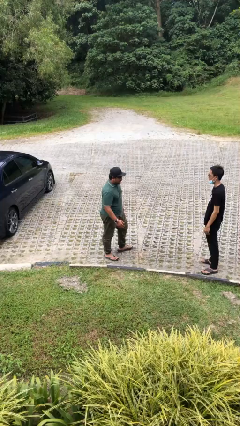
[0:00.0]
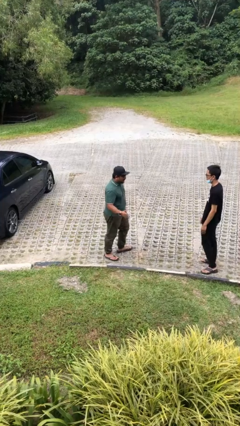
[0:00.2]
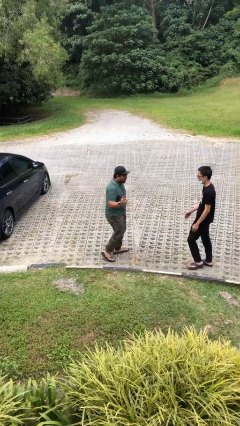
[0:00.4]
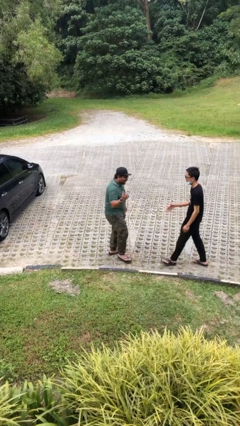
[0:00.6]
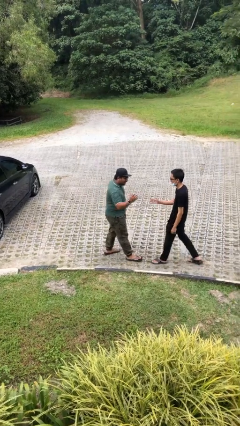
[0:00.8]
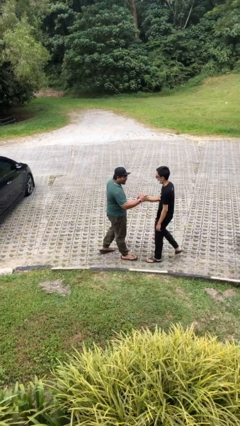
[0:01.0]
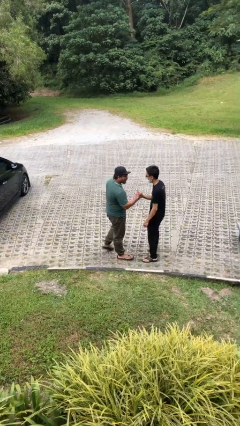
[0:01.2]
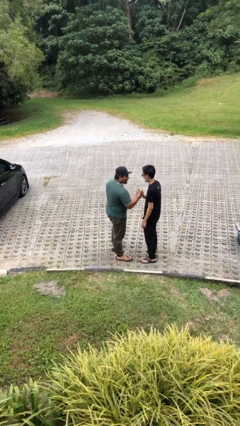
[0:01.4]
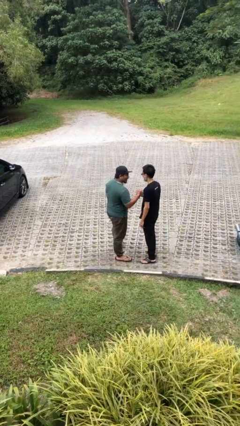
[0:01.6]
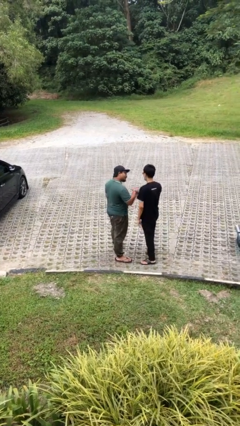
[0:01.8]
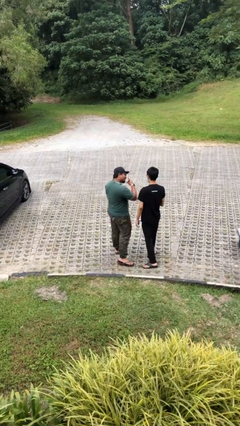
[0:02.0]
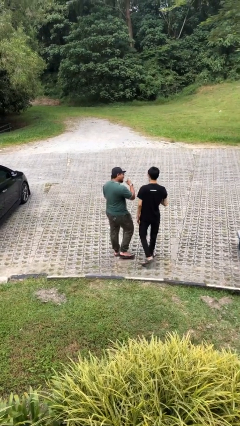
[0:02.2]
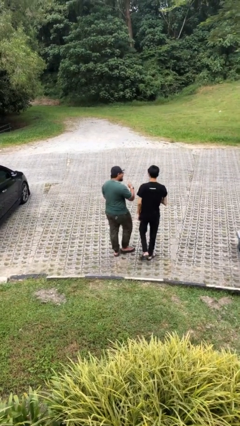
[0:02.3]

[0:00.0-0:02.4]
person shakes hand

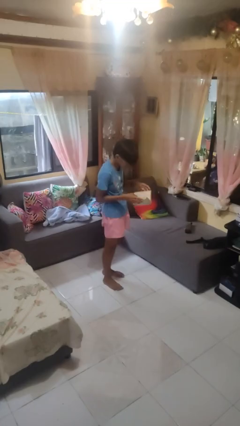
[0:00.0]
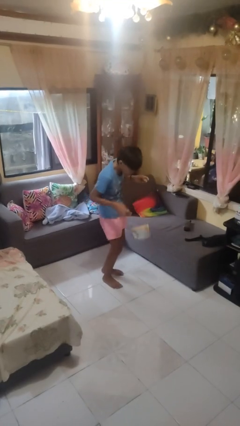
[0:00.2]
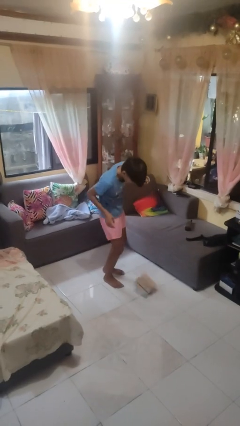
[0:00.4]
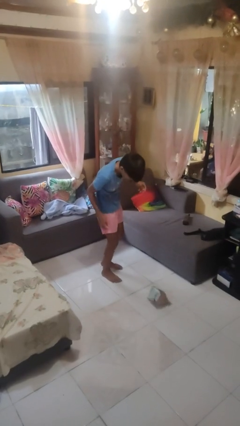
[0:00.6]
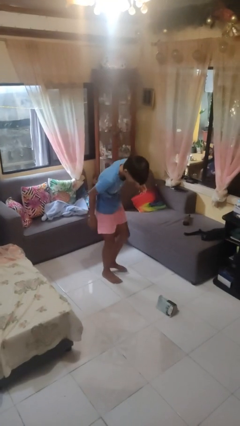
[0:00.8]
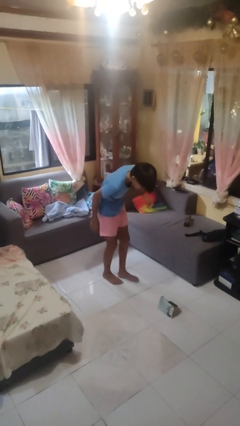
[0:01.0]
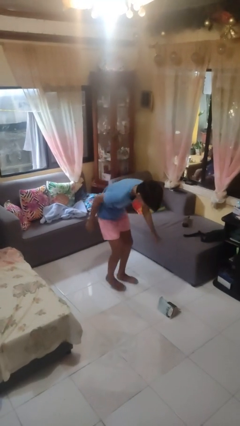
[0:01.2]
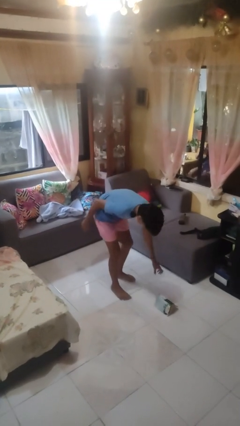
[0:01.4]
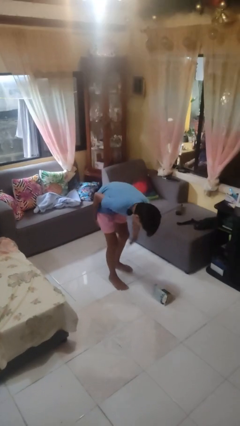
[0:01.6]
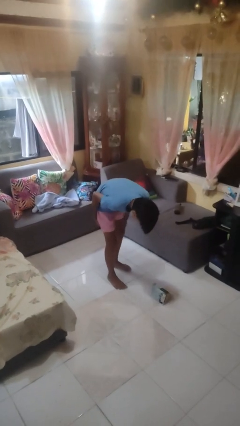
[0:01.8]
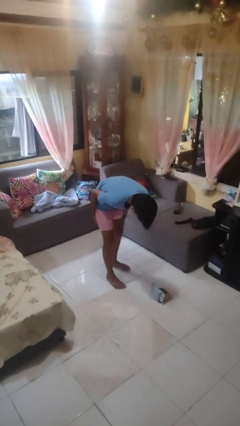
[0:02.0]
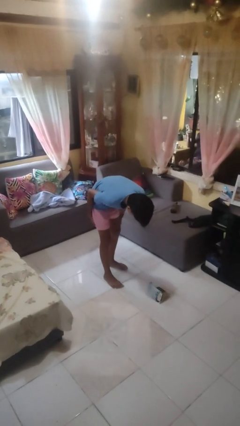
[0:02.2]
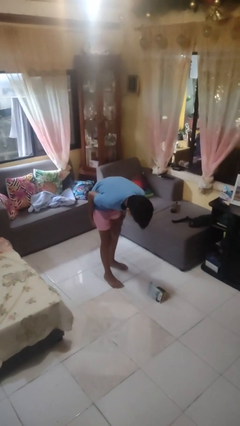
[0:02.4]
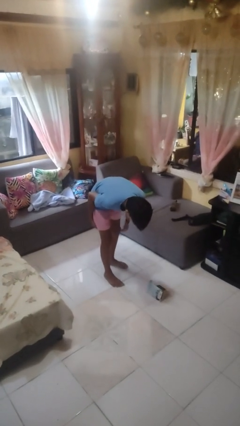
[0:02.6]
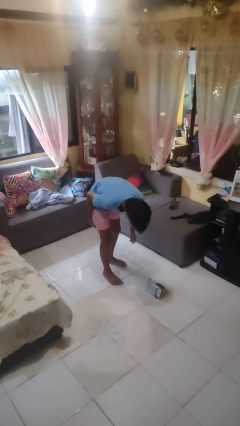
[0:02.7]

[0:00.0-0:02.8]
person drops object

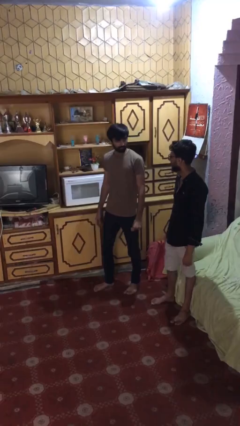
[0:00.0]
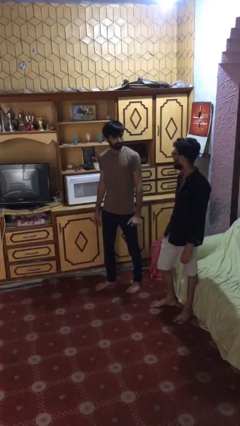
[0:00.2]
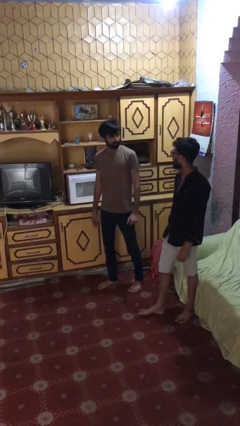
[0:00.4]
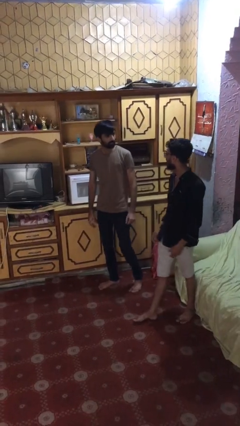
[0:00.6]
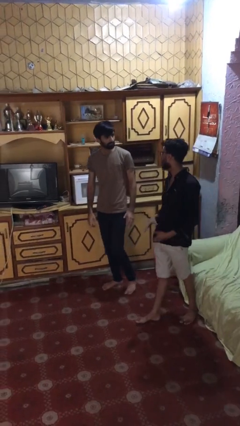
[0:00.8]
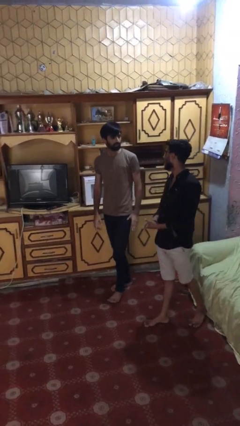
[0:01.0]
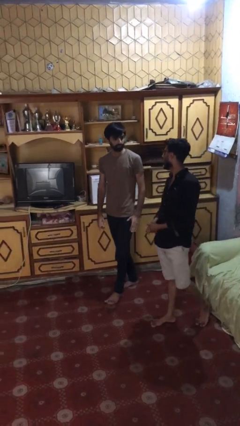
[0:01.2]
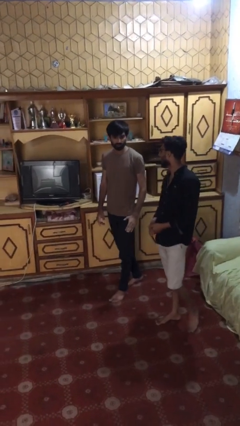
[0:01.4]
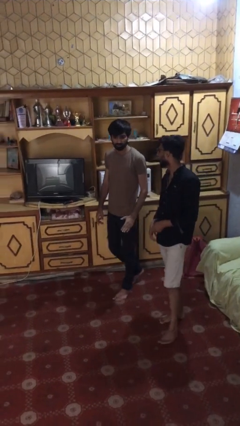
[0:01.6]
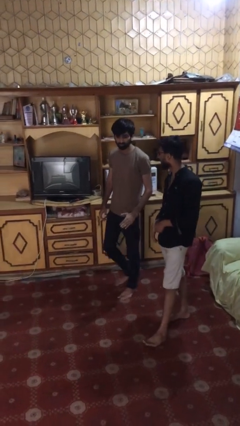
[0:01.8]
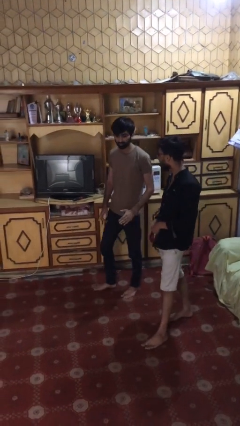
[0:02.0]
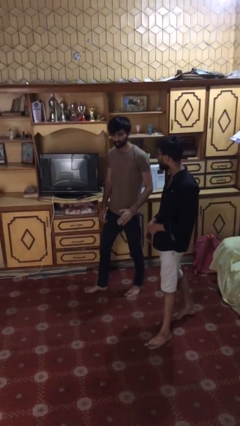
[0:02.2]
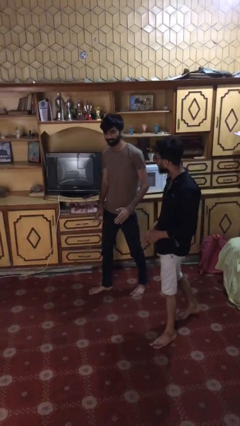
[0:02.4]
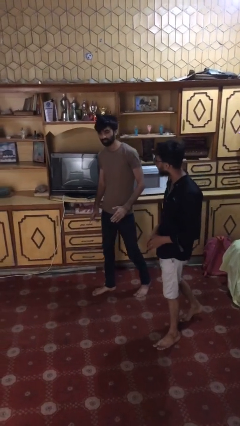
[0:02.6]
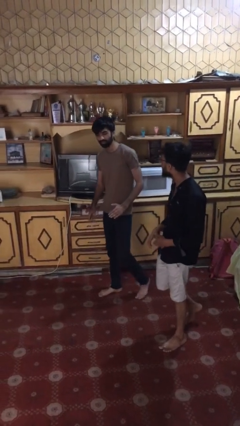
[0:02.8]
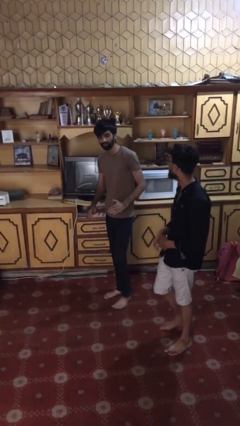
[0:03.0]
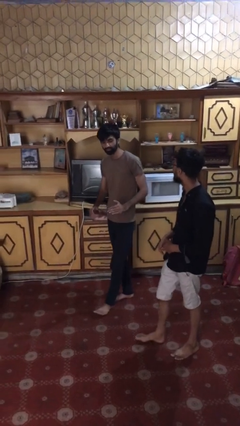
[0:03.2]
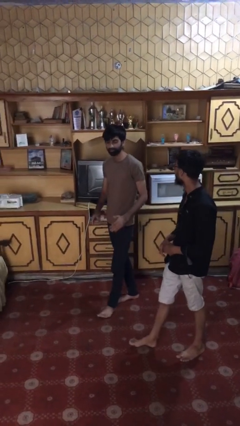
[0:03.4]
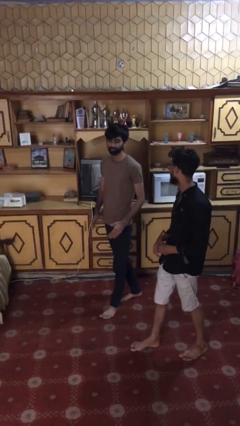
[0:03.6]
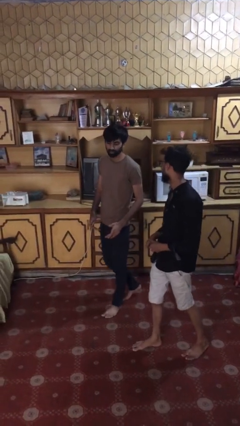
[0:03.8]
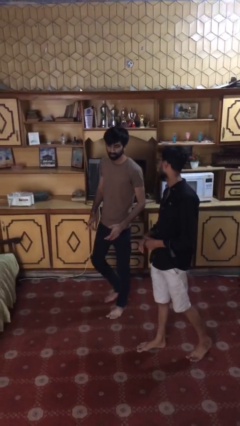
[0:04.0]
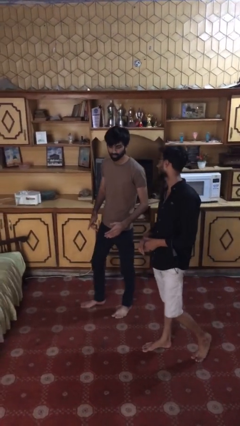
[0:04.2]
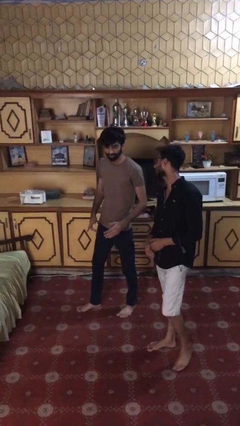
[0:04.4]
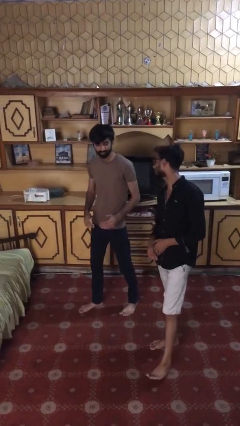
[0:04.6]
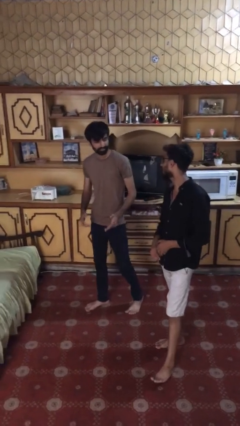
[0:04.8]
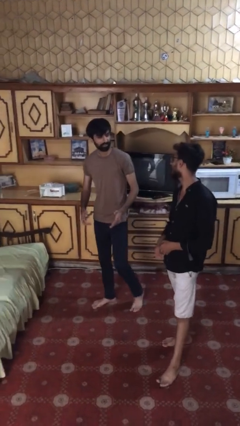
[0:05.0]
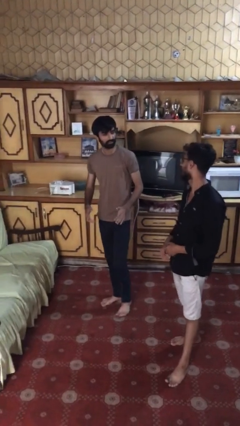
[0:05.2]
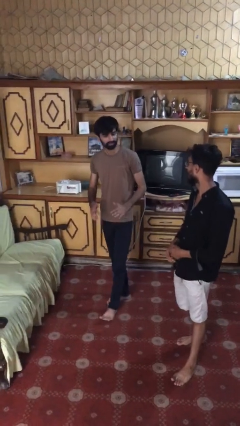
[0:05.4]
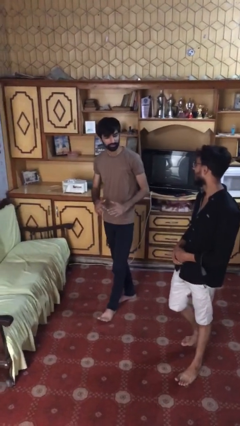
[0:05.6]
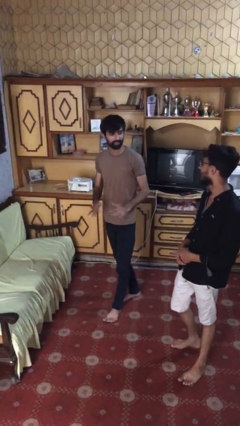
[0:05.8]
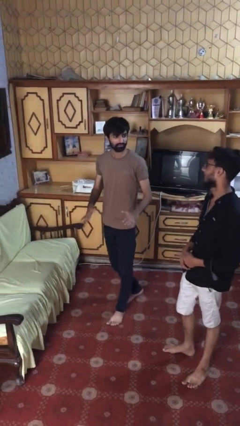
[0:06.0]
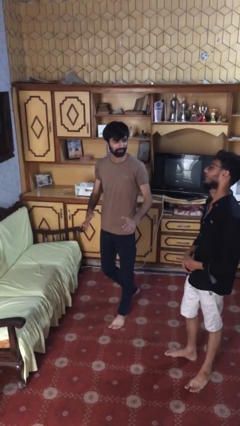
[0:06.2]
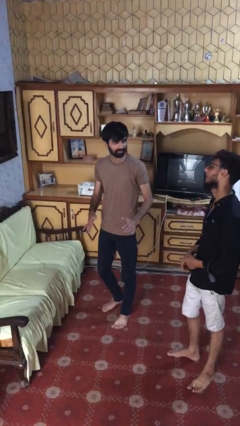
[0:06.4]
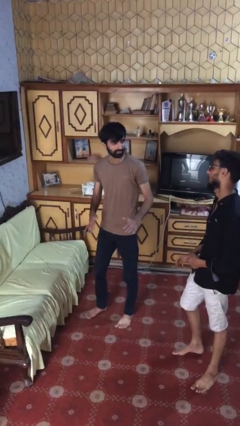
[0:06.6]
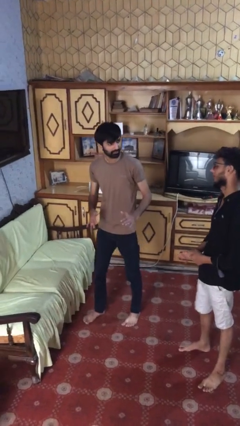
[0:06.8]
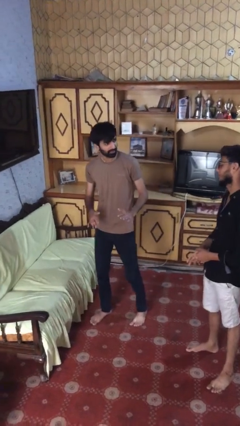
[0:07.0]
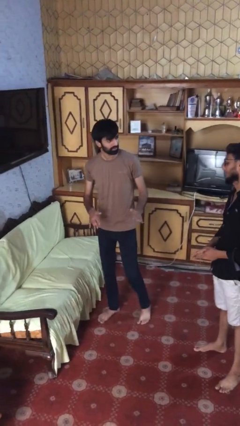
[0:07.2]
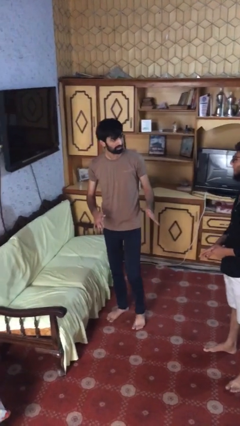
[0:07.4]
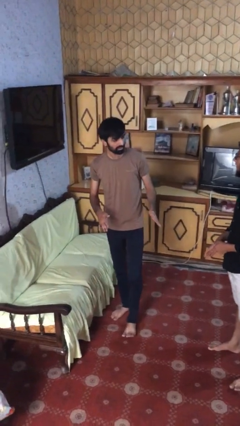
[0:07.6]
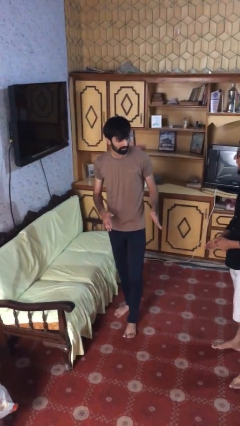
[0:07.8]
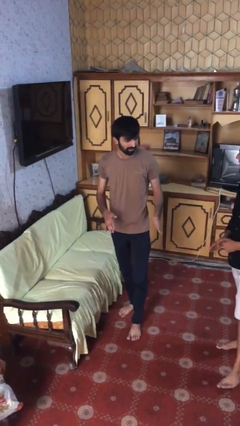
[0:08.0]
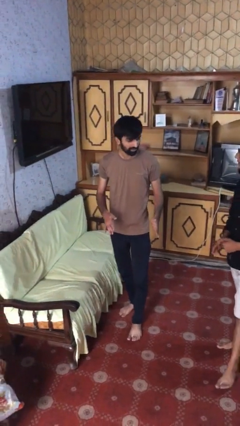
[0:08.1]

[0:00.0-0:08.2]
person talks to person

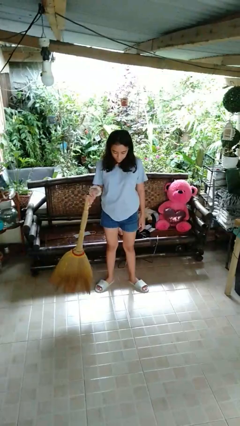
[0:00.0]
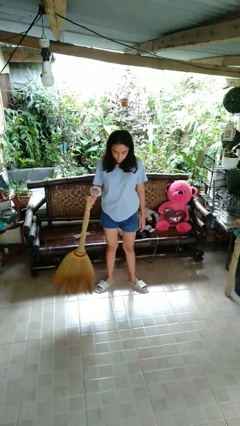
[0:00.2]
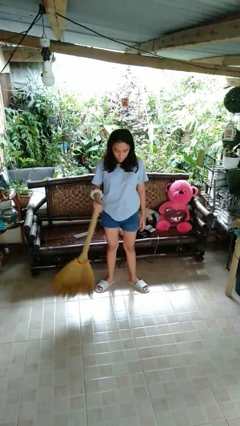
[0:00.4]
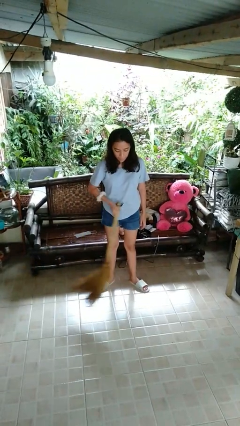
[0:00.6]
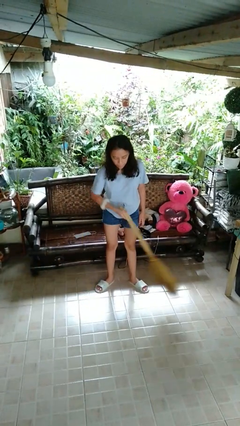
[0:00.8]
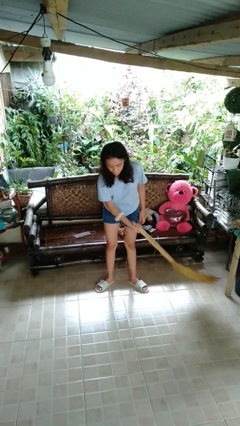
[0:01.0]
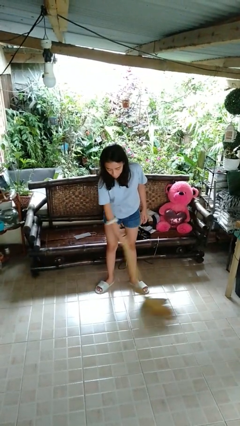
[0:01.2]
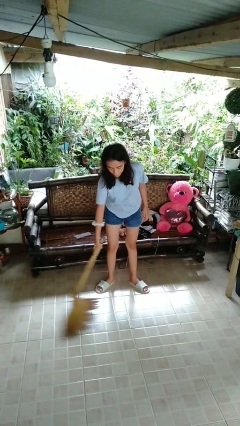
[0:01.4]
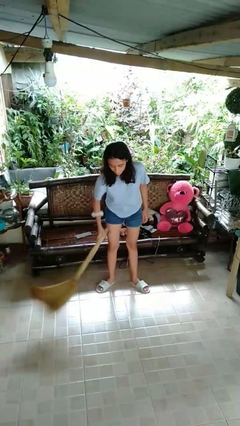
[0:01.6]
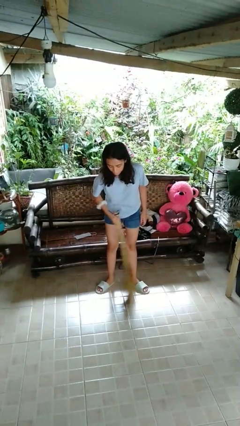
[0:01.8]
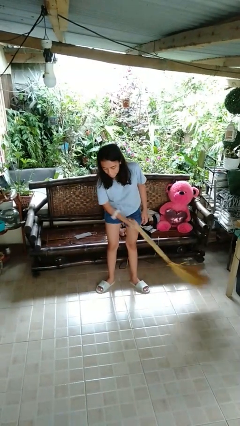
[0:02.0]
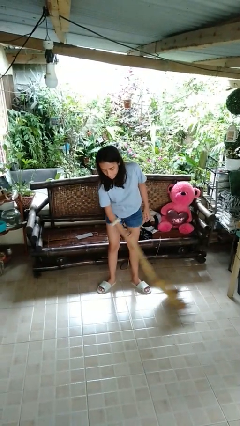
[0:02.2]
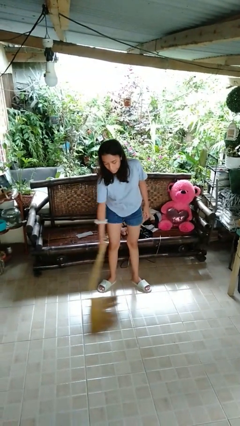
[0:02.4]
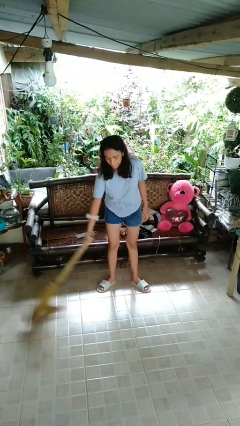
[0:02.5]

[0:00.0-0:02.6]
person sweeps floor

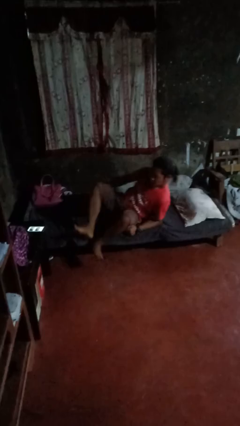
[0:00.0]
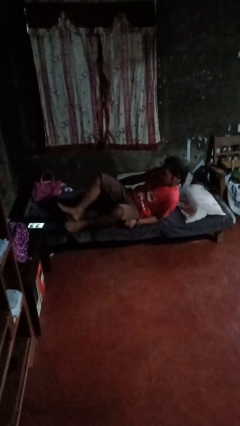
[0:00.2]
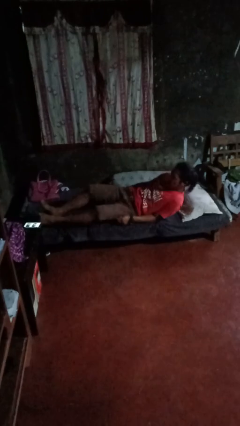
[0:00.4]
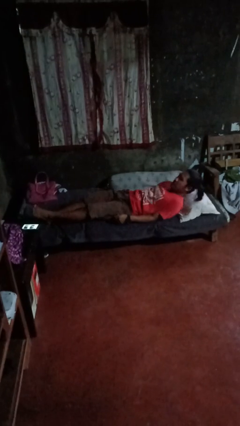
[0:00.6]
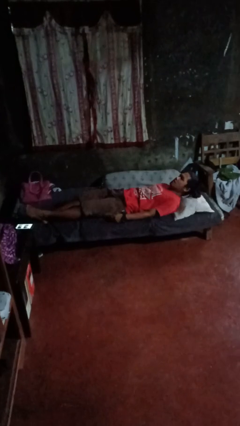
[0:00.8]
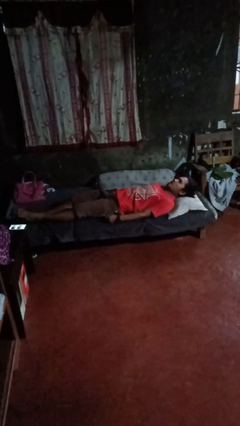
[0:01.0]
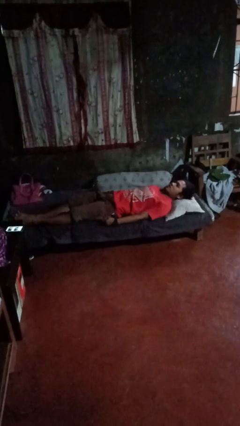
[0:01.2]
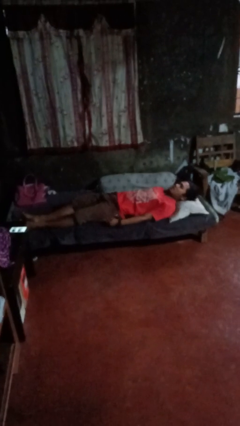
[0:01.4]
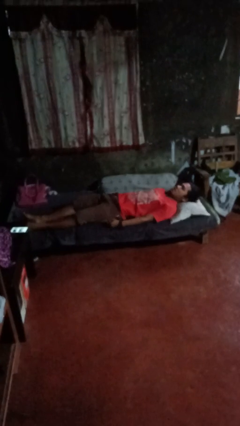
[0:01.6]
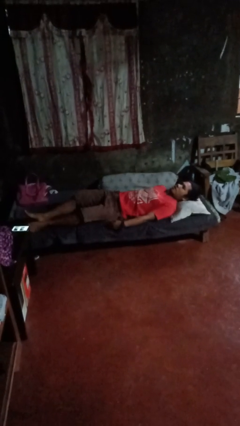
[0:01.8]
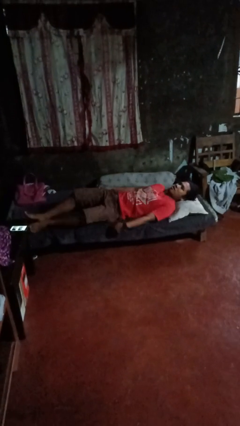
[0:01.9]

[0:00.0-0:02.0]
person lies down on bed
